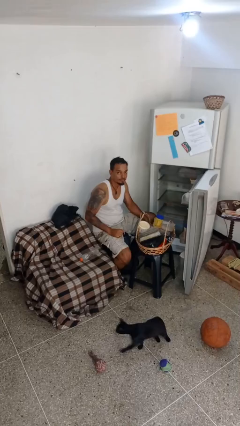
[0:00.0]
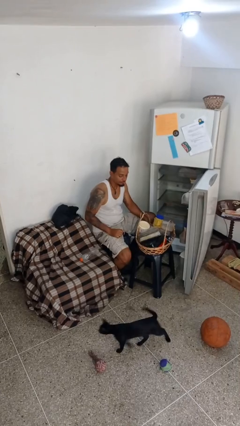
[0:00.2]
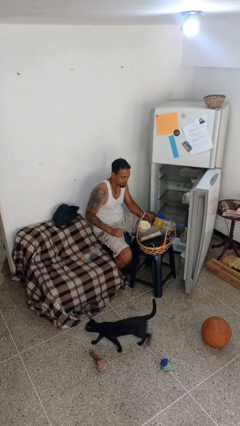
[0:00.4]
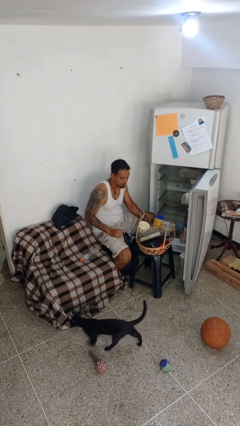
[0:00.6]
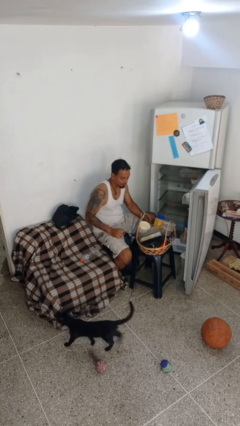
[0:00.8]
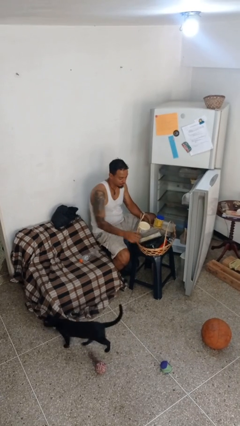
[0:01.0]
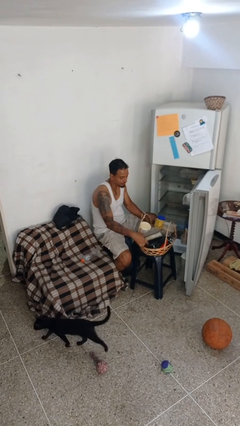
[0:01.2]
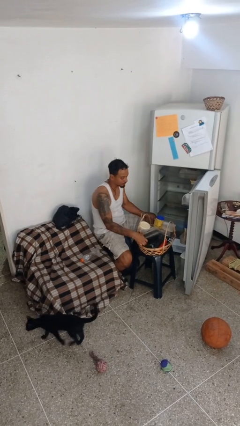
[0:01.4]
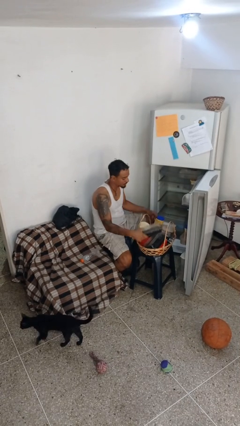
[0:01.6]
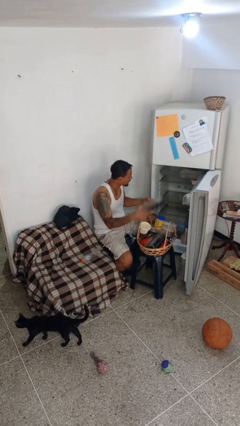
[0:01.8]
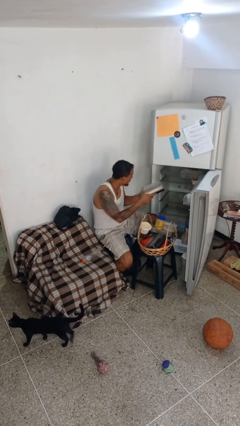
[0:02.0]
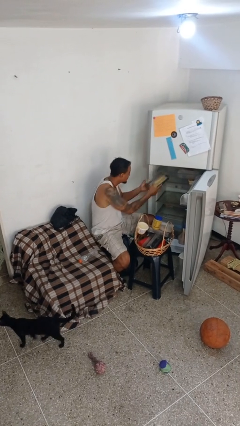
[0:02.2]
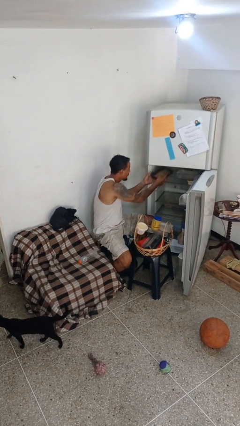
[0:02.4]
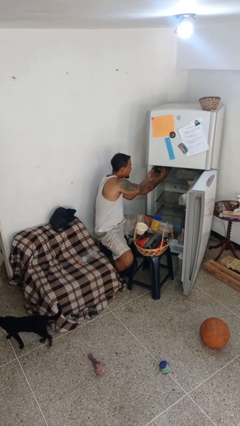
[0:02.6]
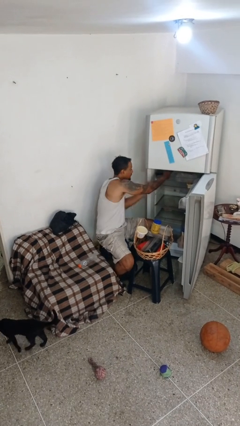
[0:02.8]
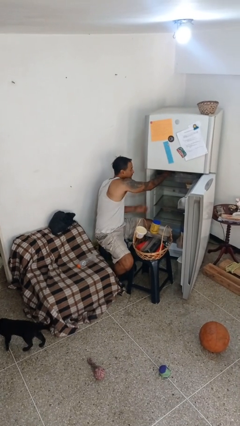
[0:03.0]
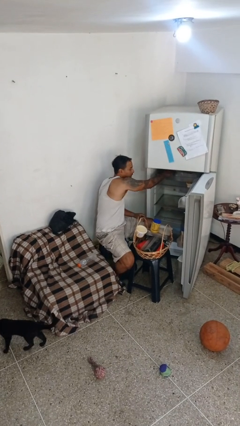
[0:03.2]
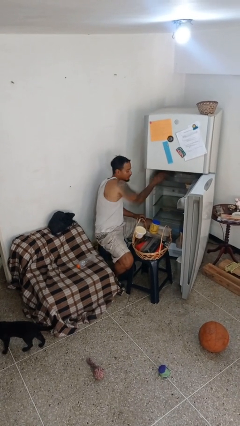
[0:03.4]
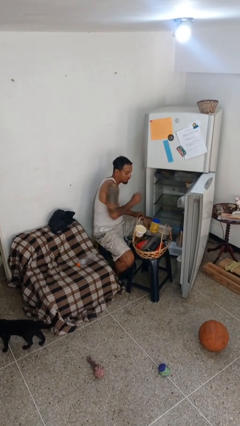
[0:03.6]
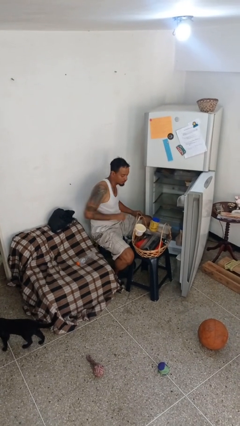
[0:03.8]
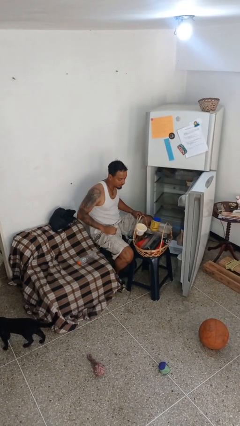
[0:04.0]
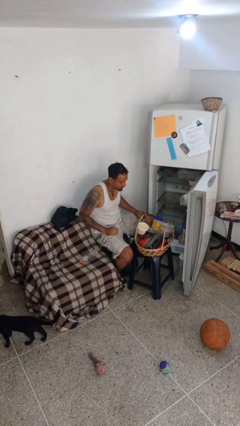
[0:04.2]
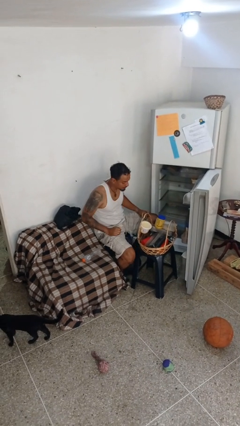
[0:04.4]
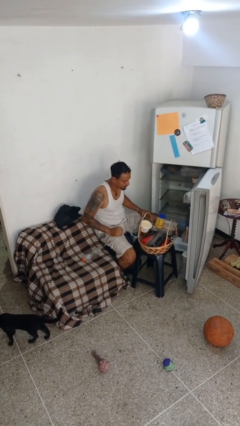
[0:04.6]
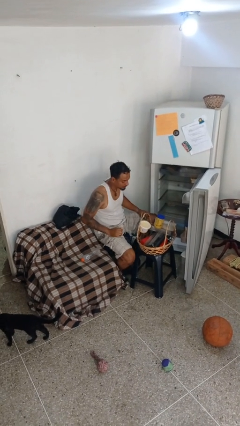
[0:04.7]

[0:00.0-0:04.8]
person loads groceries into refrigerator

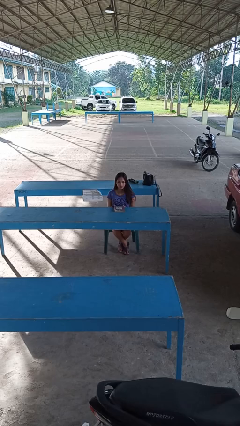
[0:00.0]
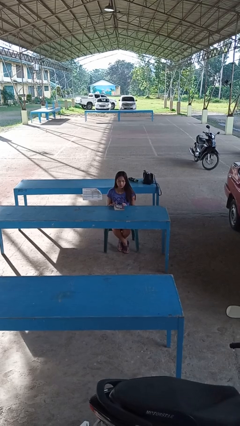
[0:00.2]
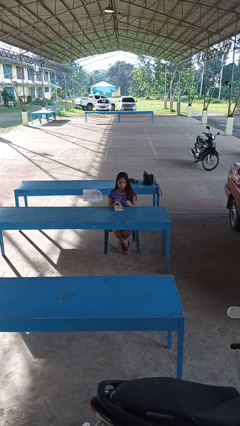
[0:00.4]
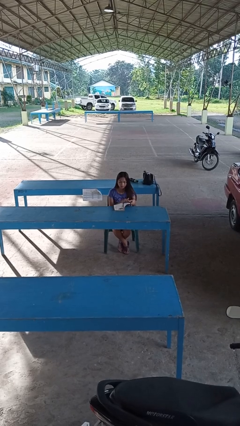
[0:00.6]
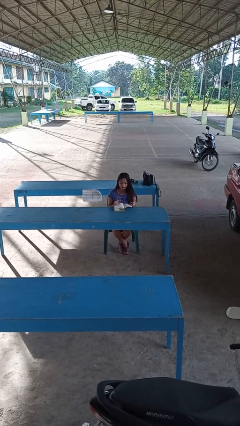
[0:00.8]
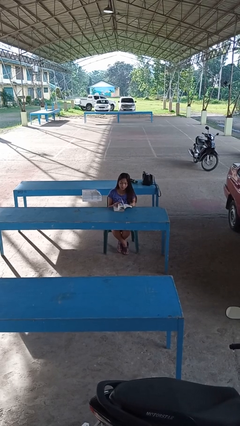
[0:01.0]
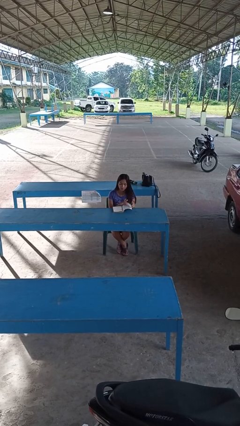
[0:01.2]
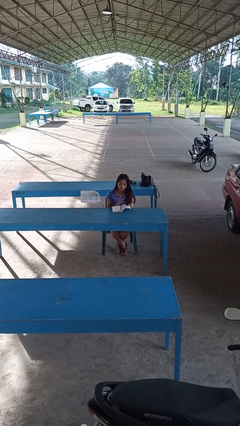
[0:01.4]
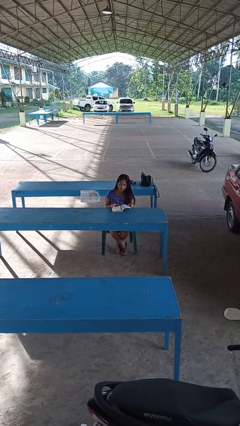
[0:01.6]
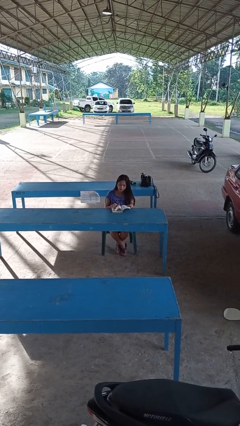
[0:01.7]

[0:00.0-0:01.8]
person reads book

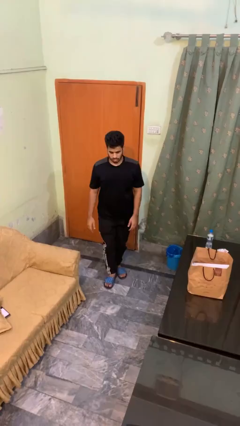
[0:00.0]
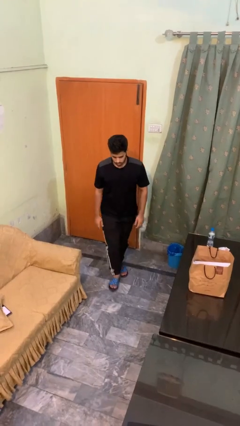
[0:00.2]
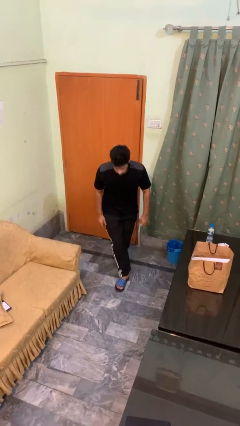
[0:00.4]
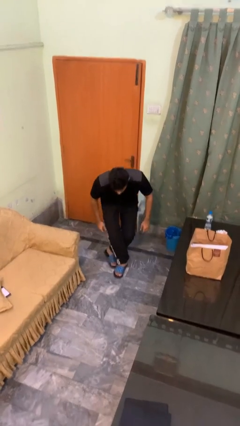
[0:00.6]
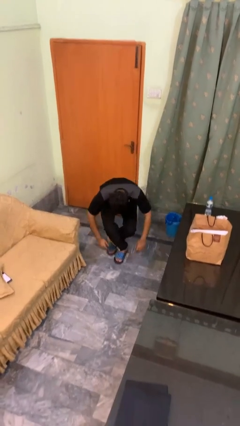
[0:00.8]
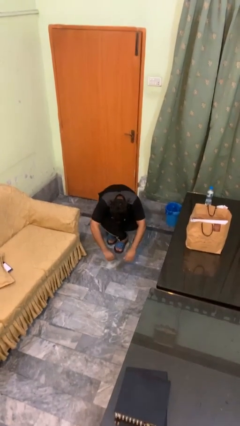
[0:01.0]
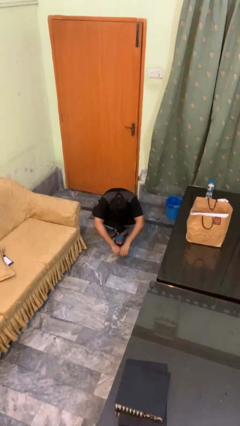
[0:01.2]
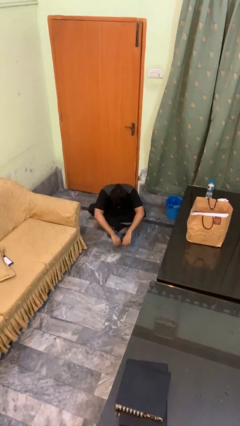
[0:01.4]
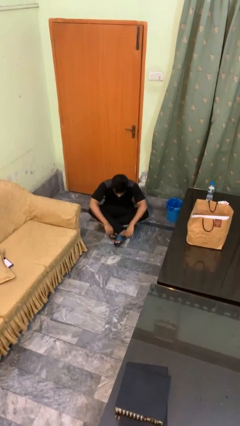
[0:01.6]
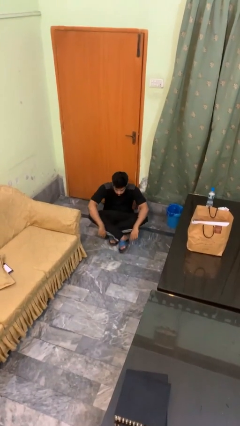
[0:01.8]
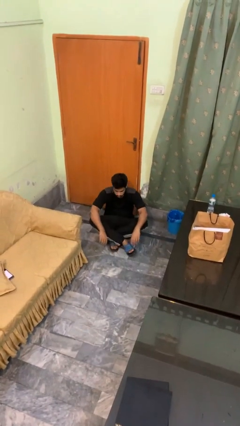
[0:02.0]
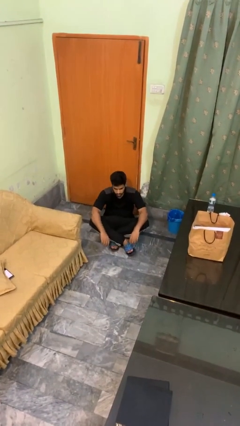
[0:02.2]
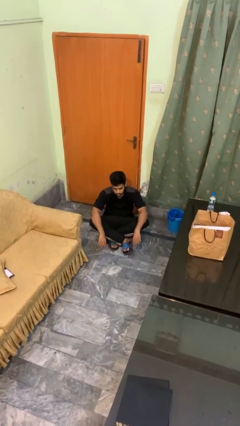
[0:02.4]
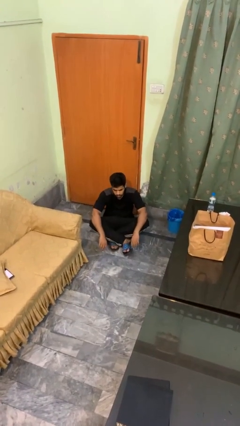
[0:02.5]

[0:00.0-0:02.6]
person sits crisscross

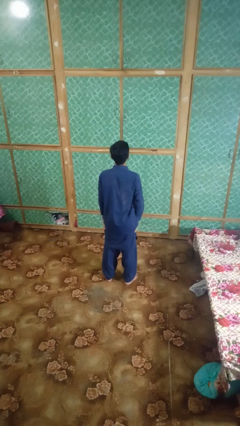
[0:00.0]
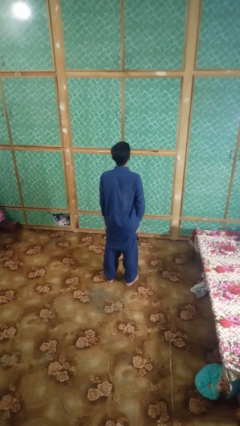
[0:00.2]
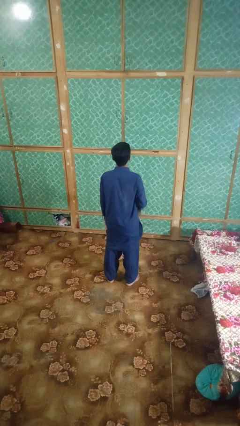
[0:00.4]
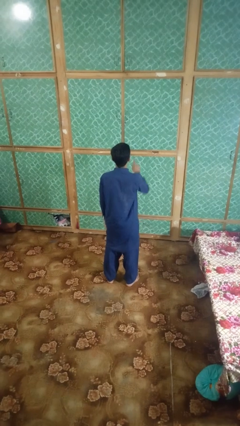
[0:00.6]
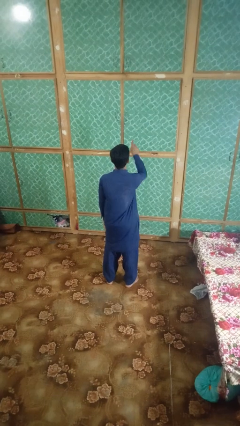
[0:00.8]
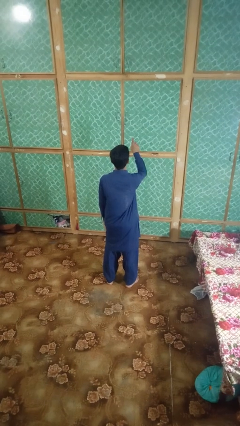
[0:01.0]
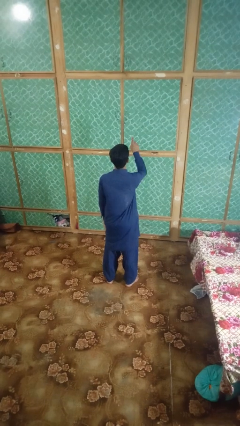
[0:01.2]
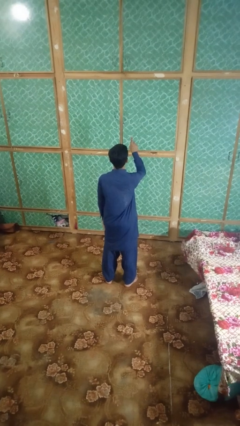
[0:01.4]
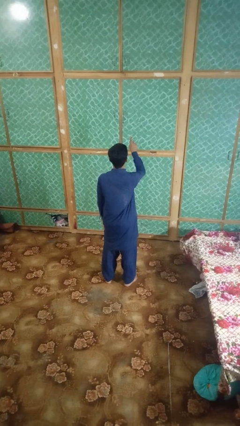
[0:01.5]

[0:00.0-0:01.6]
person gestures number one

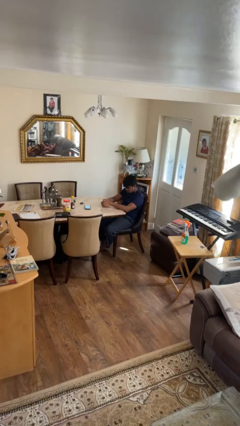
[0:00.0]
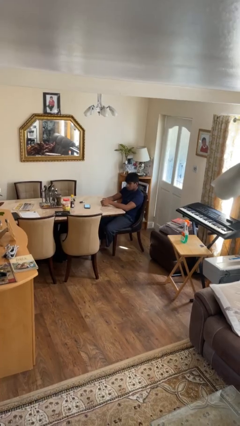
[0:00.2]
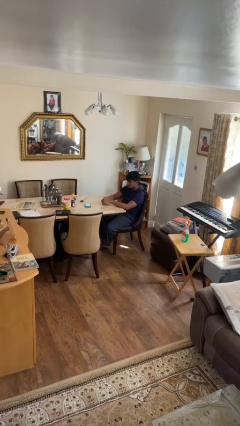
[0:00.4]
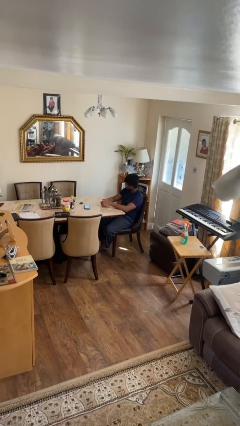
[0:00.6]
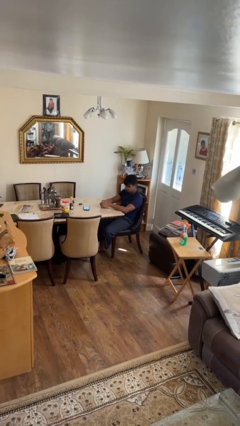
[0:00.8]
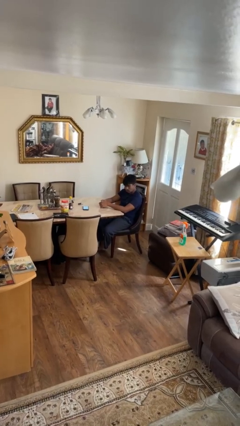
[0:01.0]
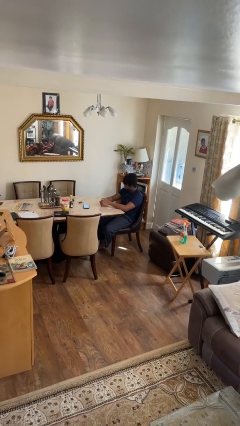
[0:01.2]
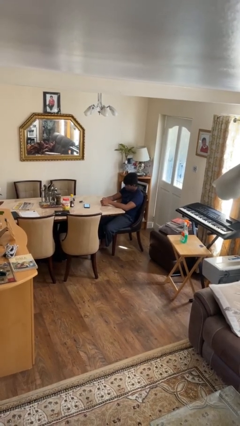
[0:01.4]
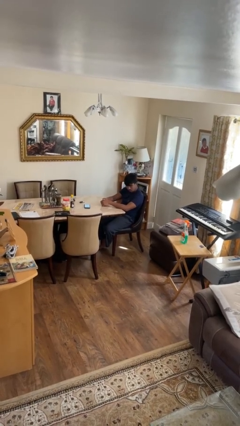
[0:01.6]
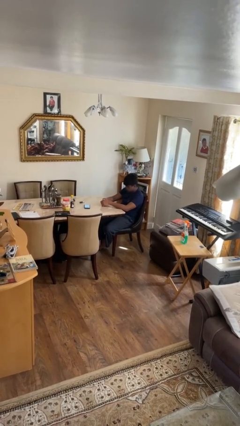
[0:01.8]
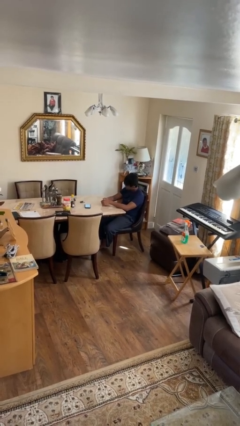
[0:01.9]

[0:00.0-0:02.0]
person shakes head

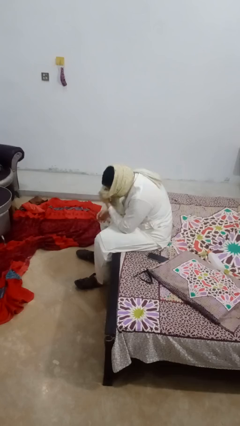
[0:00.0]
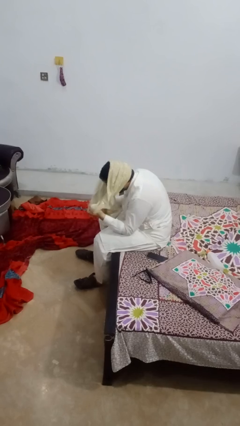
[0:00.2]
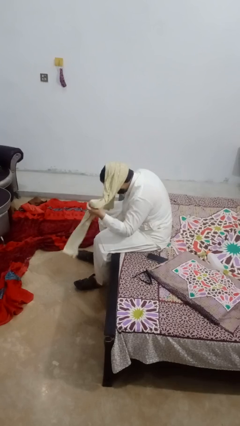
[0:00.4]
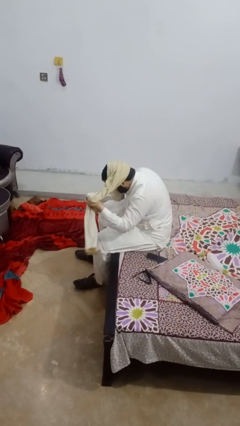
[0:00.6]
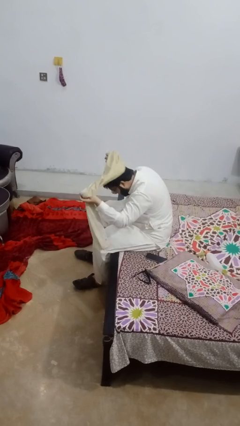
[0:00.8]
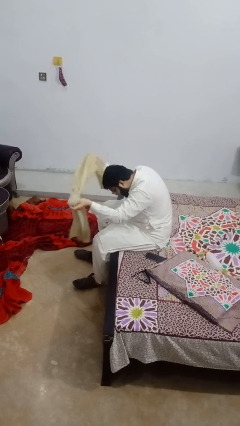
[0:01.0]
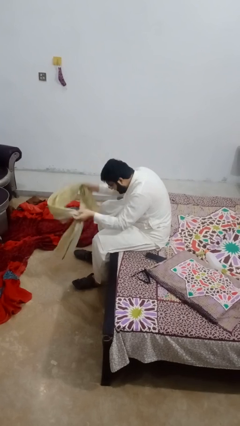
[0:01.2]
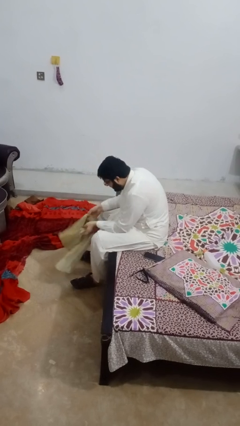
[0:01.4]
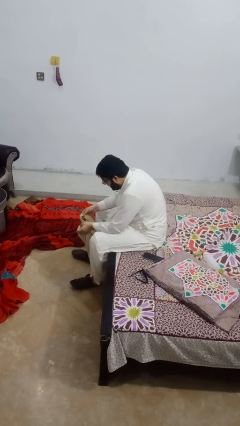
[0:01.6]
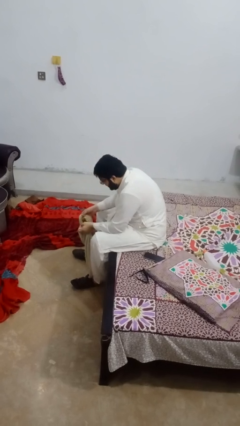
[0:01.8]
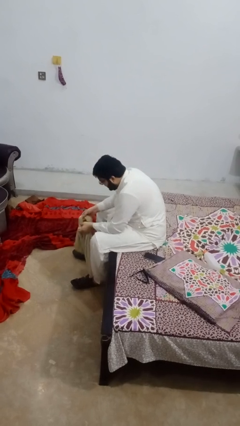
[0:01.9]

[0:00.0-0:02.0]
person takes off scarf

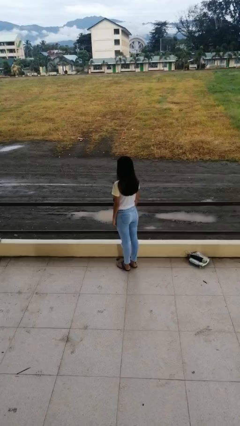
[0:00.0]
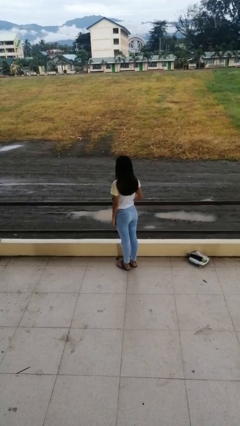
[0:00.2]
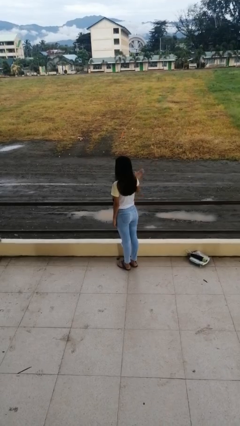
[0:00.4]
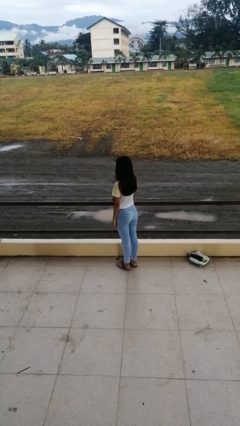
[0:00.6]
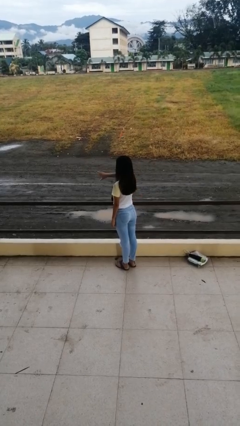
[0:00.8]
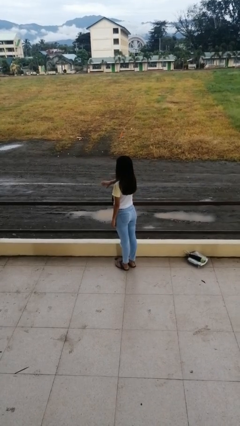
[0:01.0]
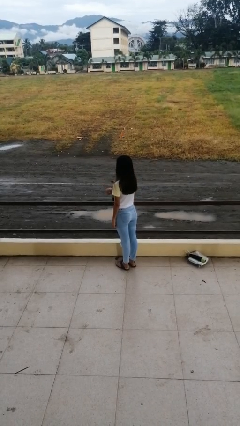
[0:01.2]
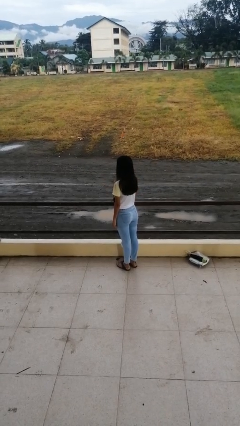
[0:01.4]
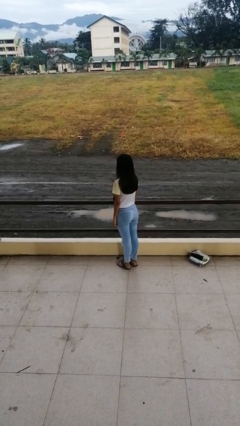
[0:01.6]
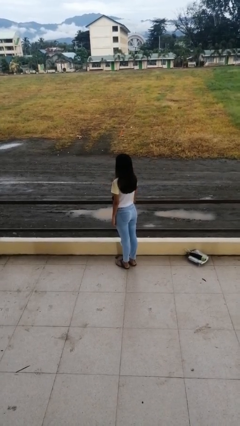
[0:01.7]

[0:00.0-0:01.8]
person gestures swipe left

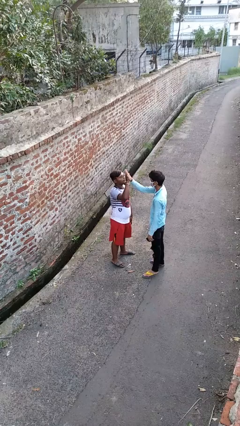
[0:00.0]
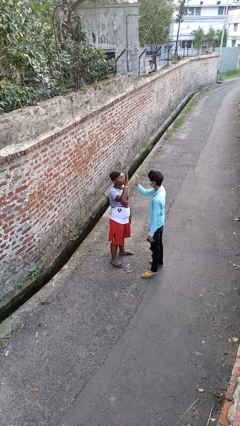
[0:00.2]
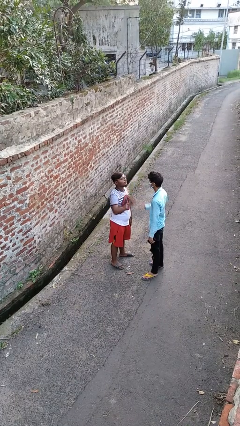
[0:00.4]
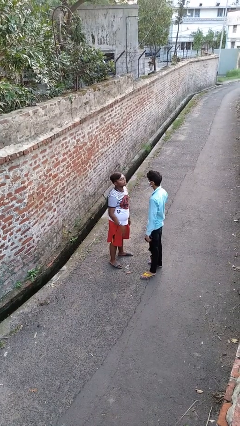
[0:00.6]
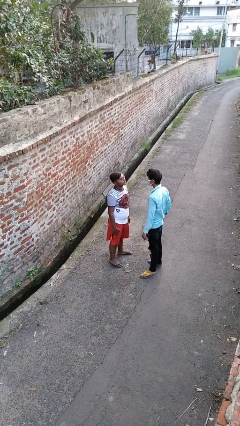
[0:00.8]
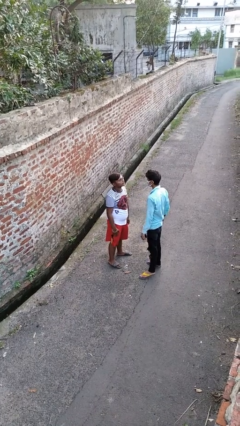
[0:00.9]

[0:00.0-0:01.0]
person highfives hand
